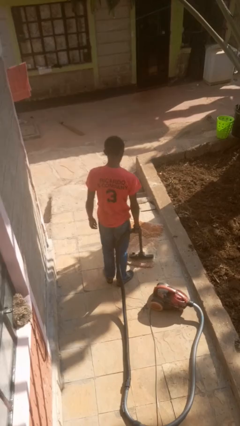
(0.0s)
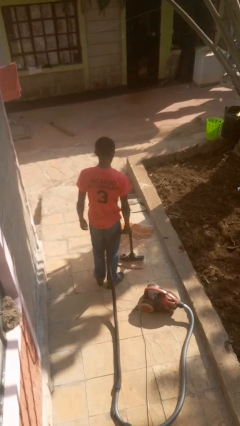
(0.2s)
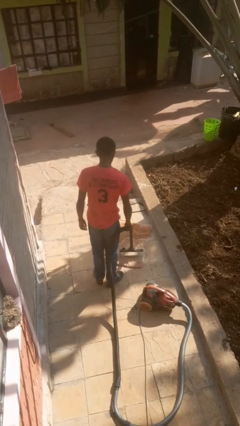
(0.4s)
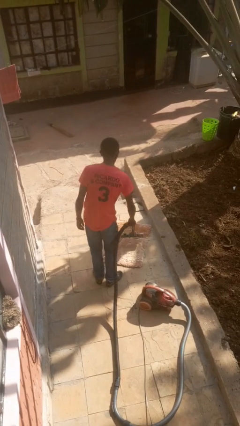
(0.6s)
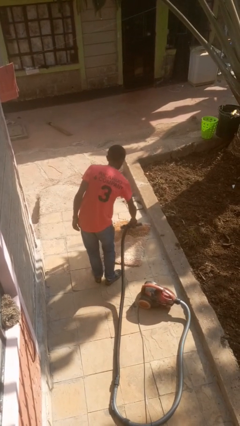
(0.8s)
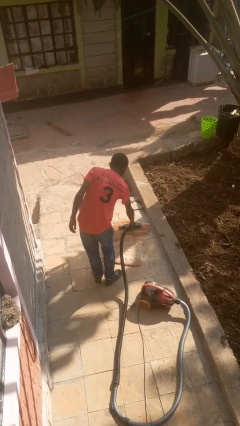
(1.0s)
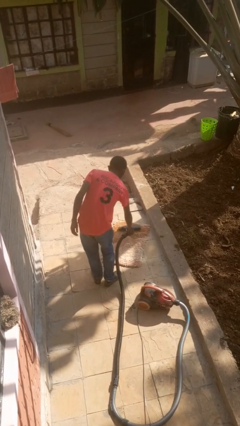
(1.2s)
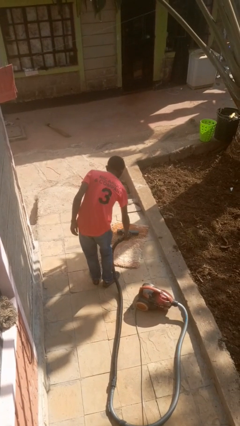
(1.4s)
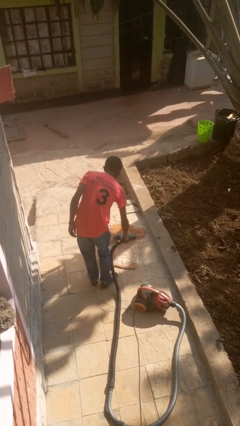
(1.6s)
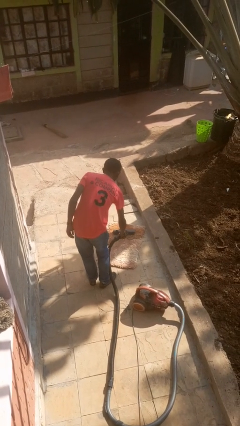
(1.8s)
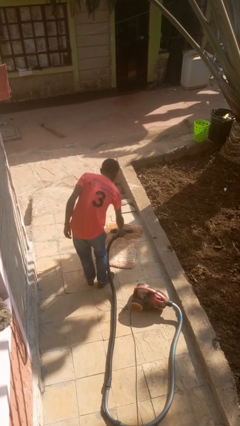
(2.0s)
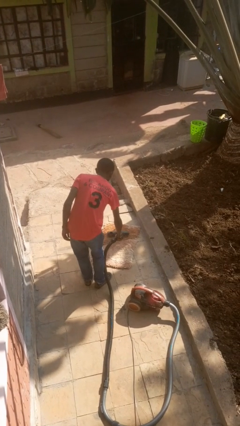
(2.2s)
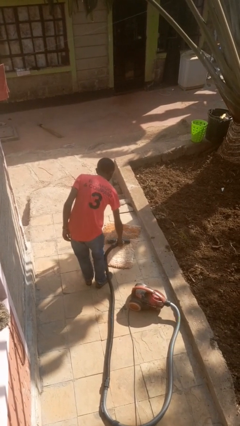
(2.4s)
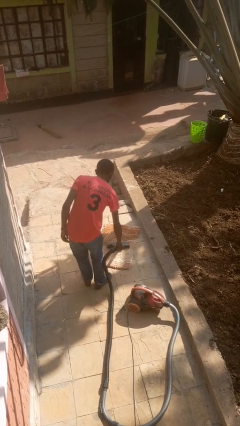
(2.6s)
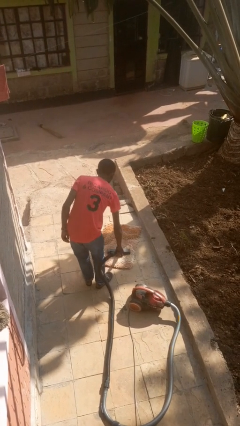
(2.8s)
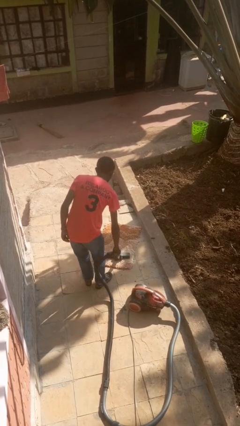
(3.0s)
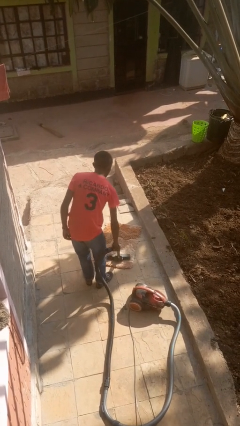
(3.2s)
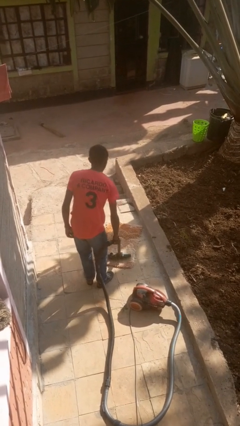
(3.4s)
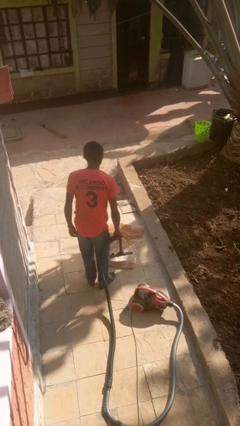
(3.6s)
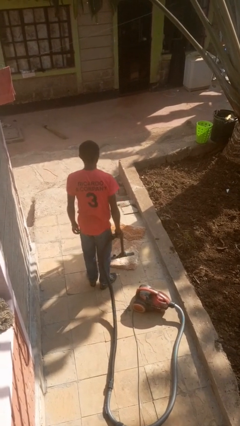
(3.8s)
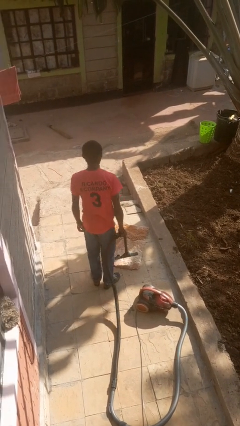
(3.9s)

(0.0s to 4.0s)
person vacuums carpet

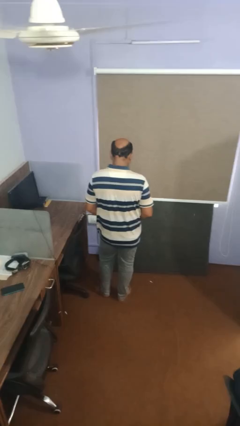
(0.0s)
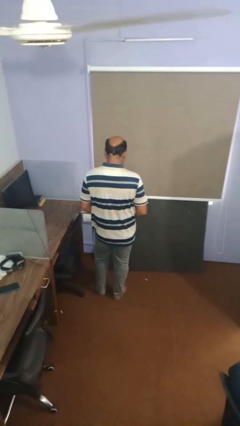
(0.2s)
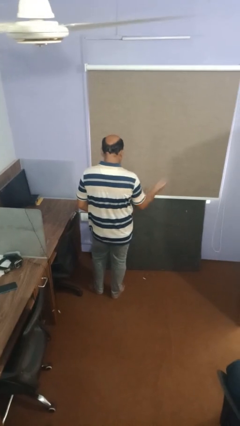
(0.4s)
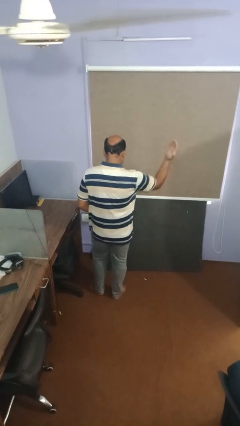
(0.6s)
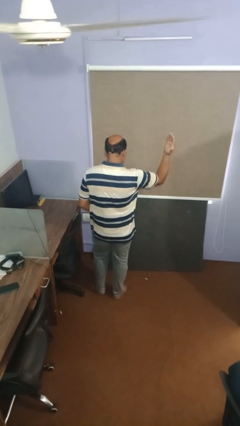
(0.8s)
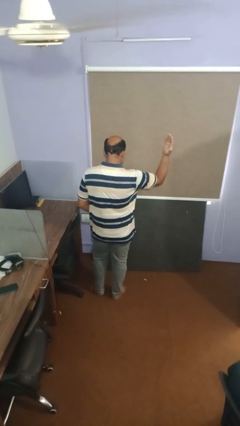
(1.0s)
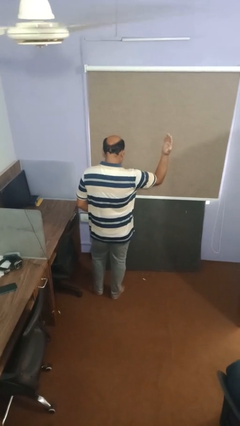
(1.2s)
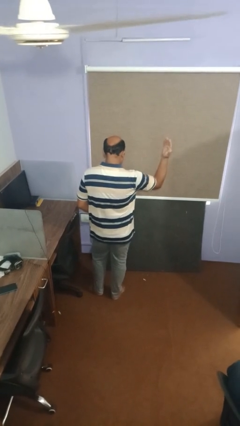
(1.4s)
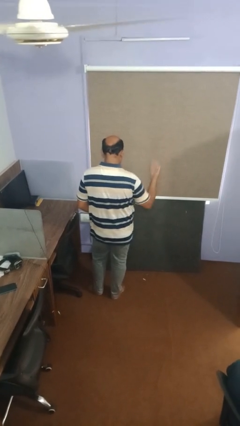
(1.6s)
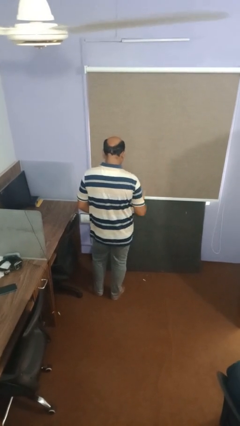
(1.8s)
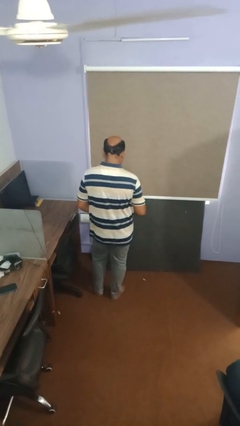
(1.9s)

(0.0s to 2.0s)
person gestures swipe right

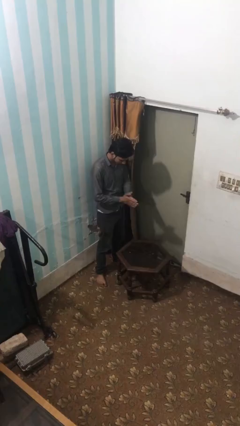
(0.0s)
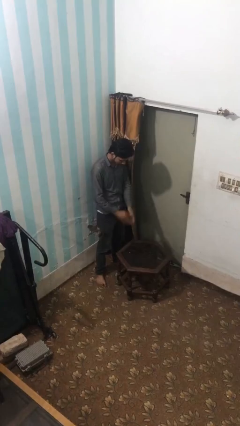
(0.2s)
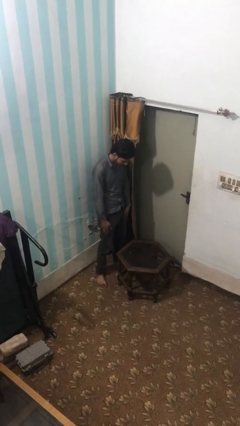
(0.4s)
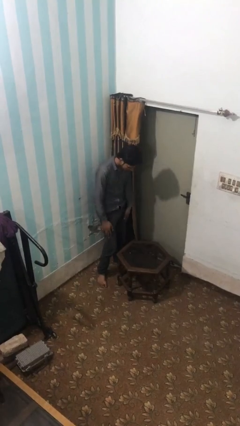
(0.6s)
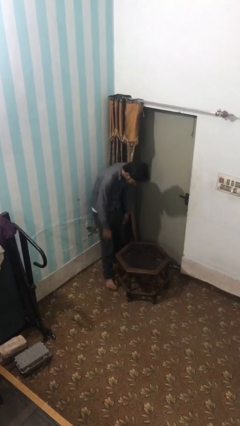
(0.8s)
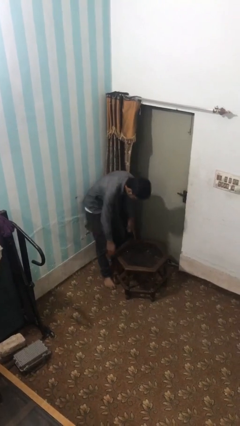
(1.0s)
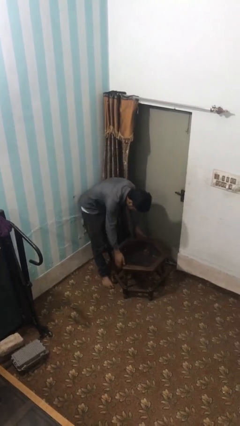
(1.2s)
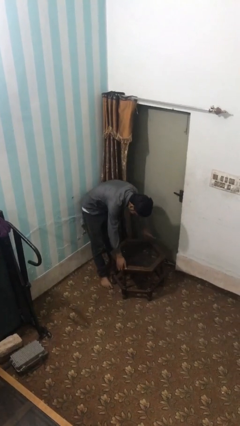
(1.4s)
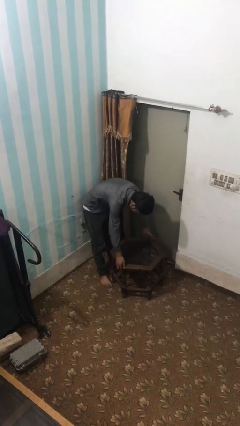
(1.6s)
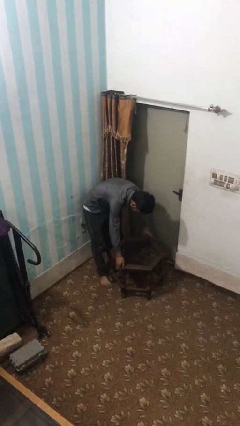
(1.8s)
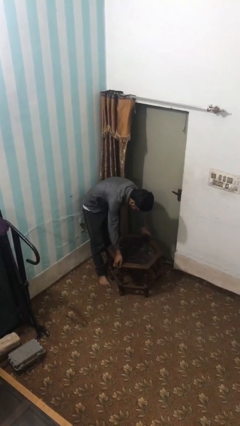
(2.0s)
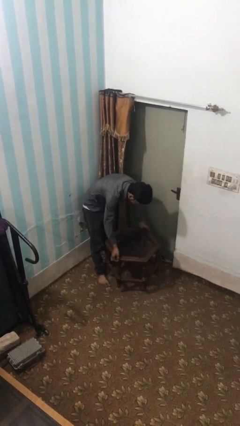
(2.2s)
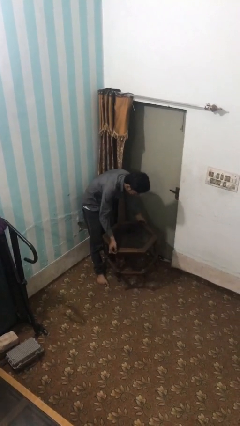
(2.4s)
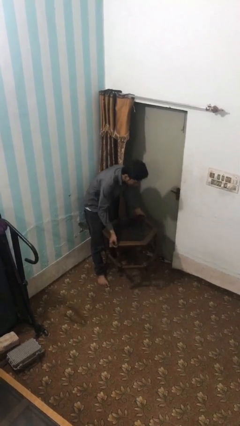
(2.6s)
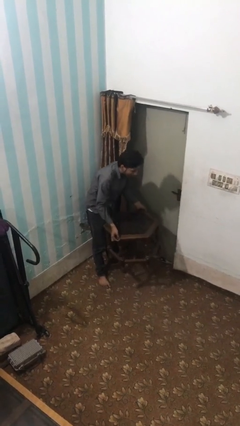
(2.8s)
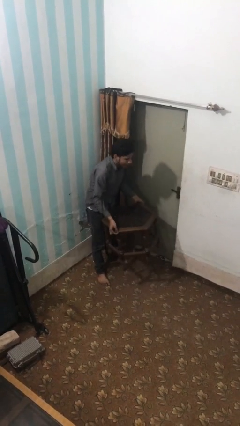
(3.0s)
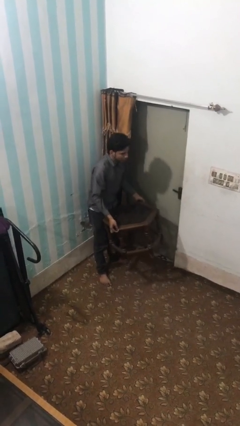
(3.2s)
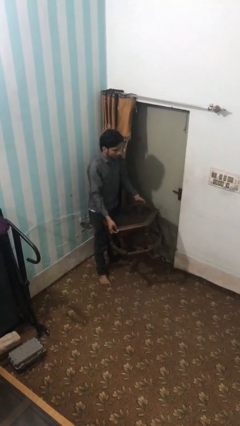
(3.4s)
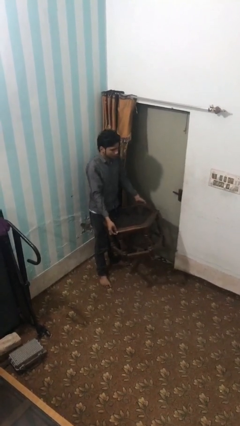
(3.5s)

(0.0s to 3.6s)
person picks up object from floor

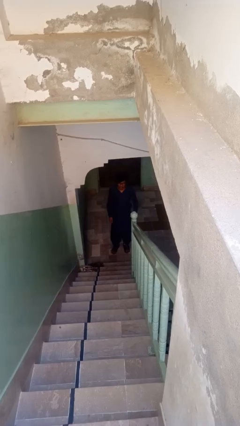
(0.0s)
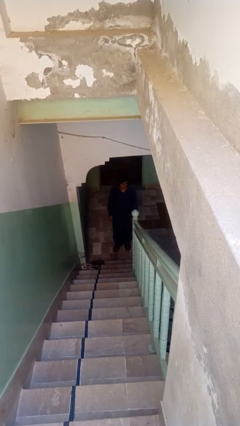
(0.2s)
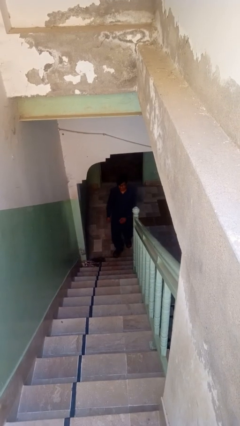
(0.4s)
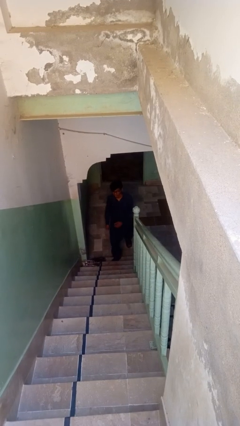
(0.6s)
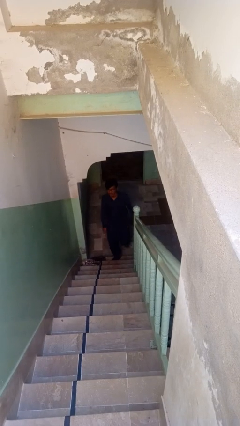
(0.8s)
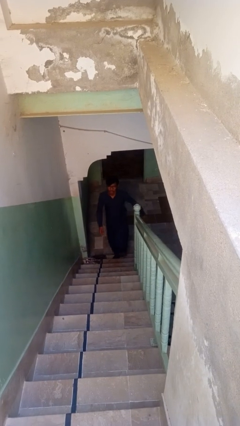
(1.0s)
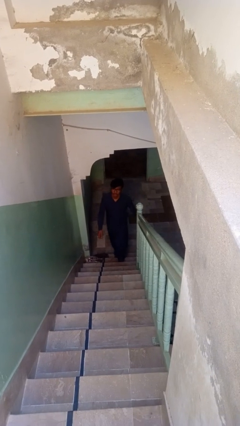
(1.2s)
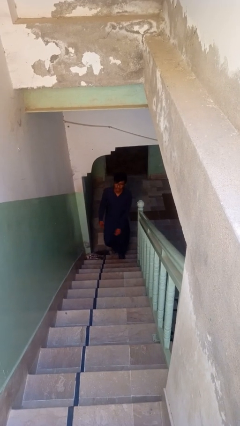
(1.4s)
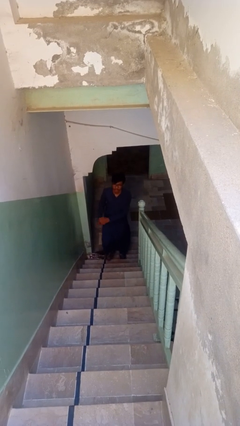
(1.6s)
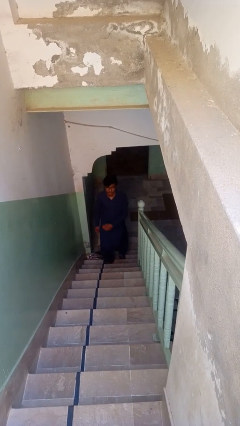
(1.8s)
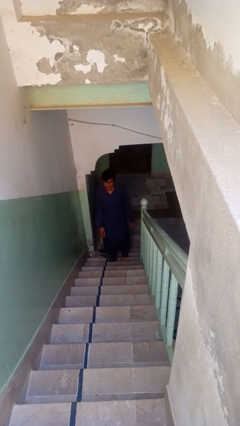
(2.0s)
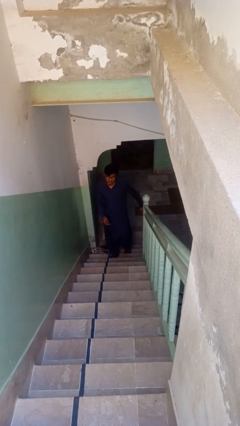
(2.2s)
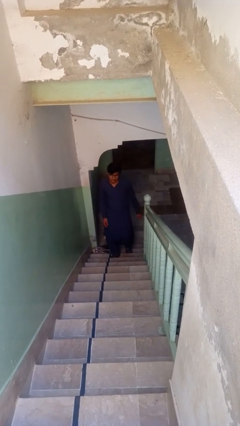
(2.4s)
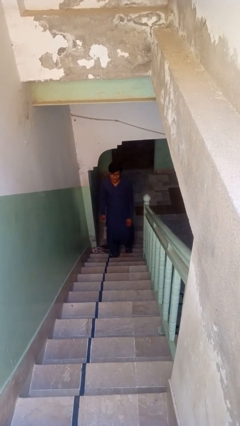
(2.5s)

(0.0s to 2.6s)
person climbs up stairs

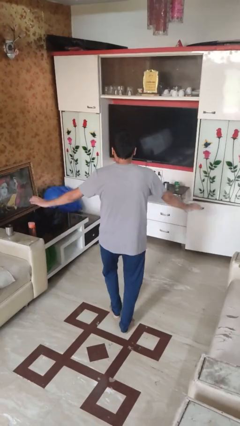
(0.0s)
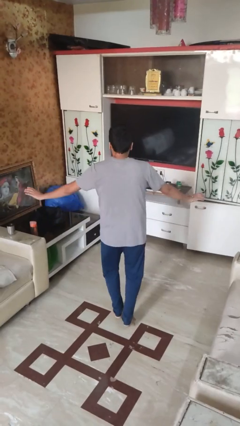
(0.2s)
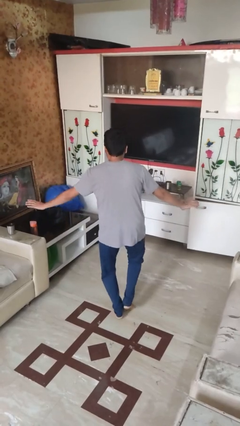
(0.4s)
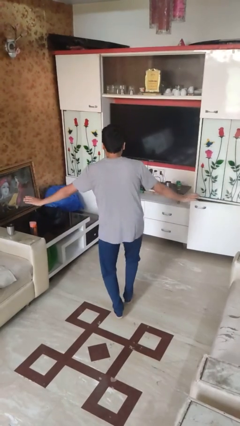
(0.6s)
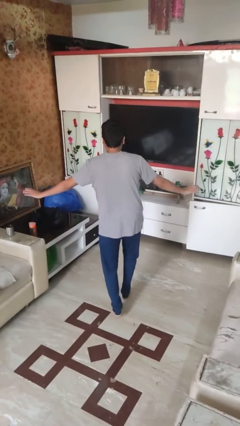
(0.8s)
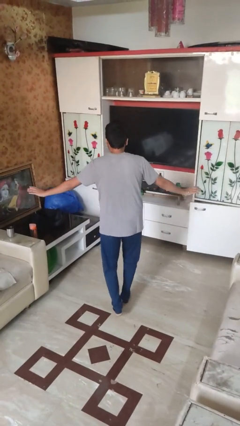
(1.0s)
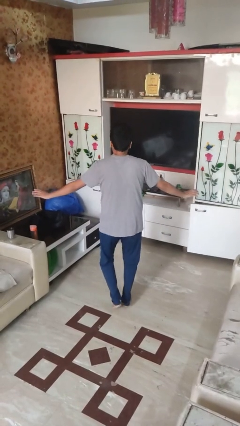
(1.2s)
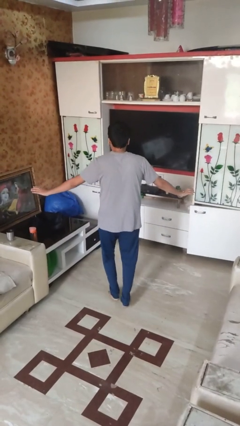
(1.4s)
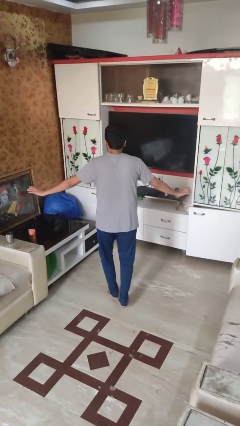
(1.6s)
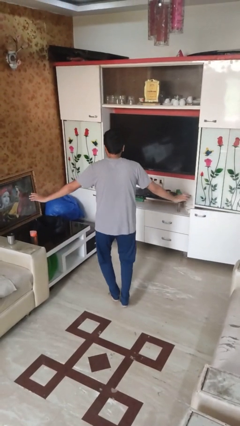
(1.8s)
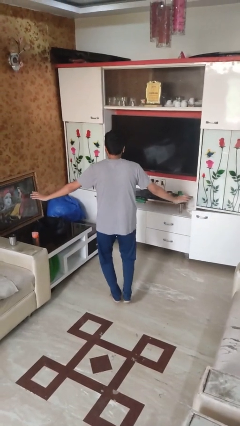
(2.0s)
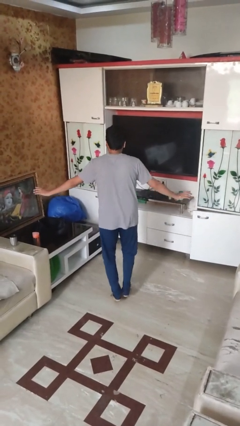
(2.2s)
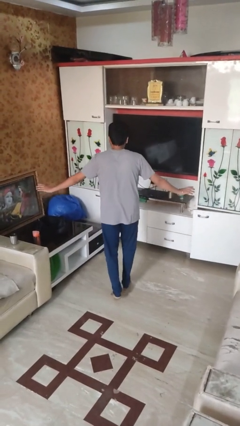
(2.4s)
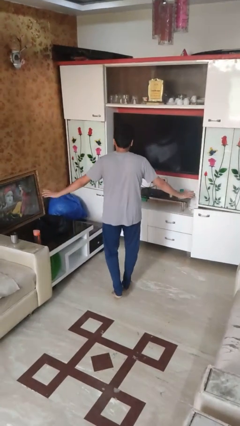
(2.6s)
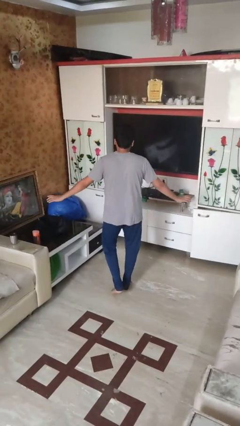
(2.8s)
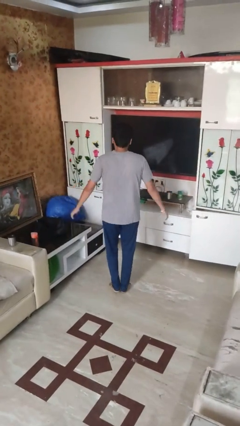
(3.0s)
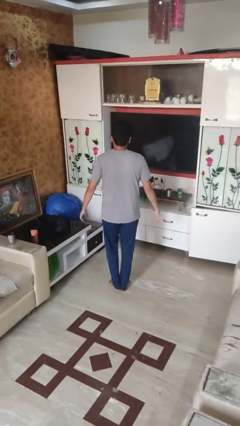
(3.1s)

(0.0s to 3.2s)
person walks tiptoe

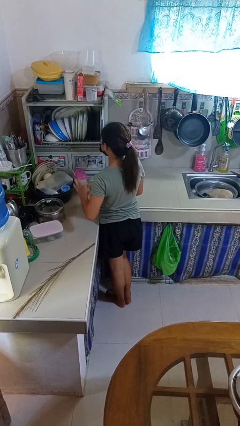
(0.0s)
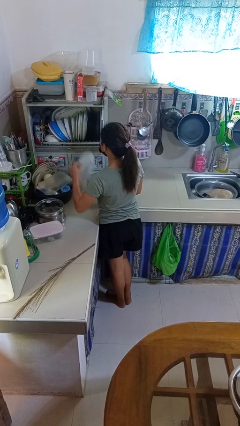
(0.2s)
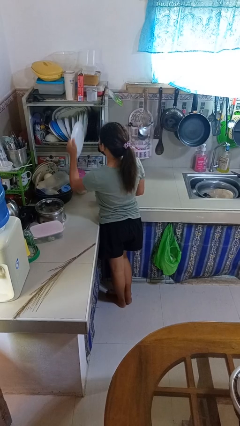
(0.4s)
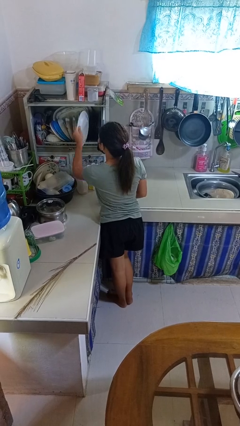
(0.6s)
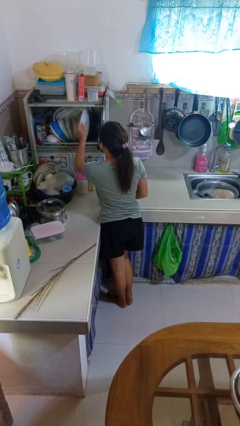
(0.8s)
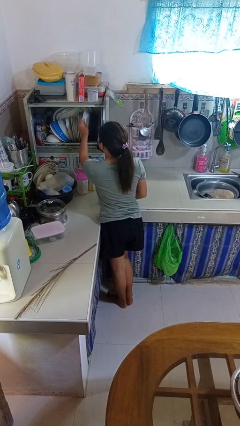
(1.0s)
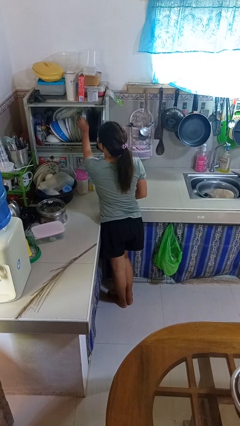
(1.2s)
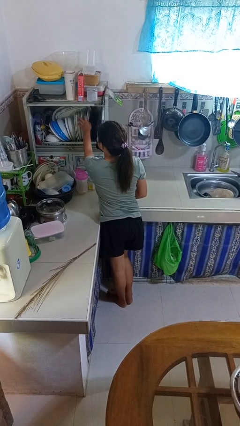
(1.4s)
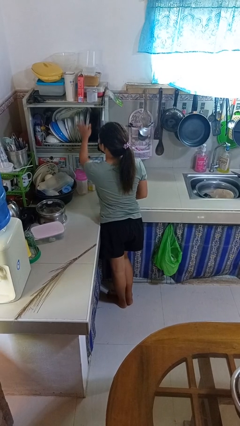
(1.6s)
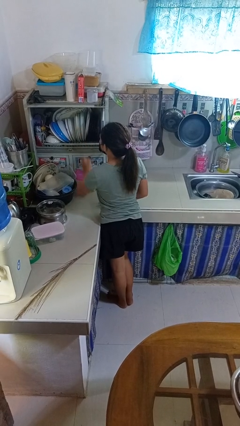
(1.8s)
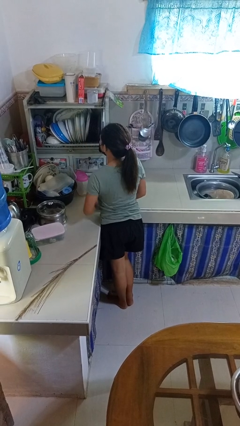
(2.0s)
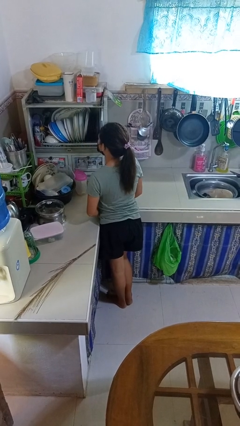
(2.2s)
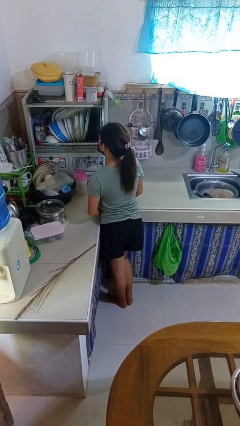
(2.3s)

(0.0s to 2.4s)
person puts object into kitchen drawer
